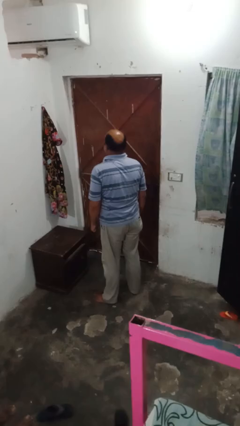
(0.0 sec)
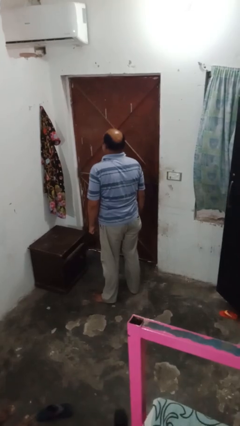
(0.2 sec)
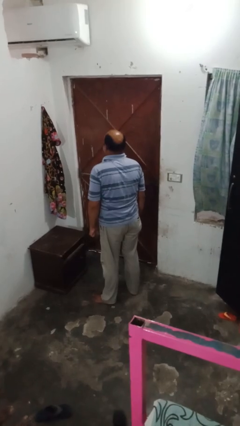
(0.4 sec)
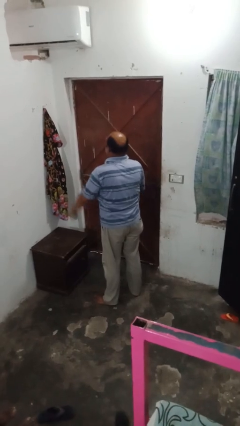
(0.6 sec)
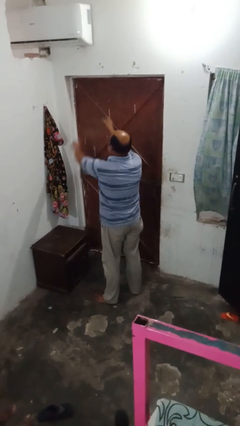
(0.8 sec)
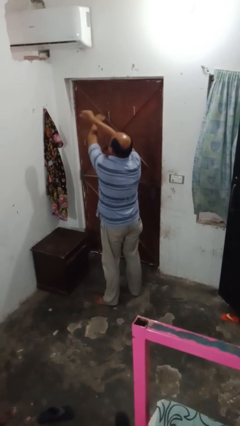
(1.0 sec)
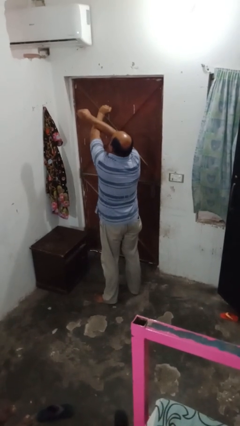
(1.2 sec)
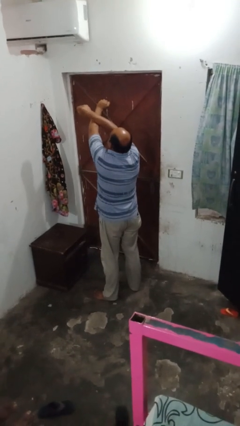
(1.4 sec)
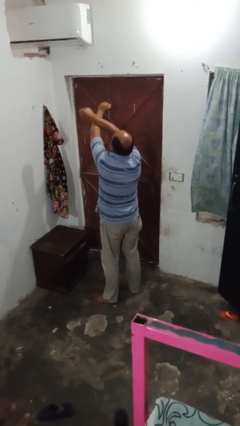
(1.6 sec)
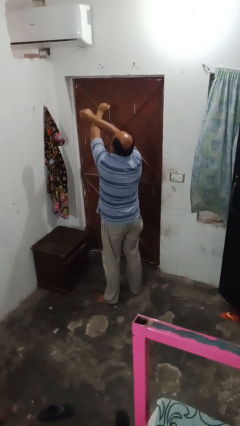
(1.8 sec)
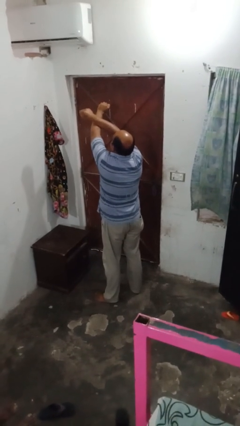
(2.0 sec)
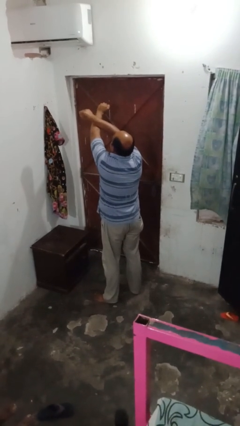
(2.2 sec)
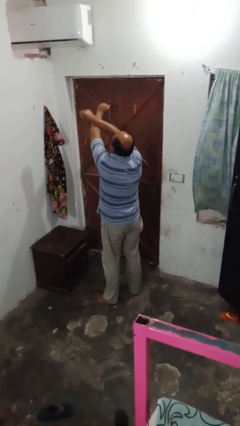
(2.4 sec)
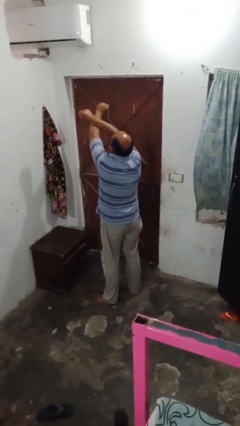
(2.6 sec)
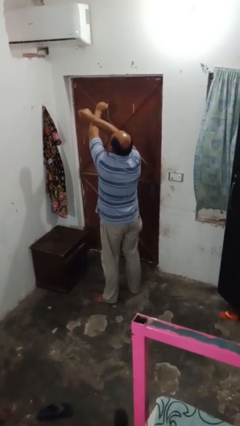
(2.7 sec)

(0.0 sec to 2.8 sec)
person gestures arms x

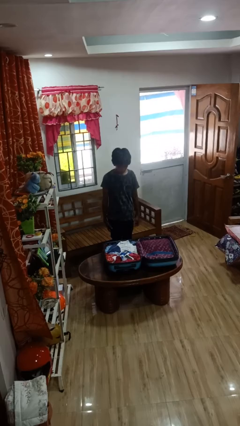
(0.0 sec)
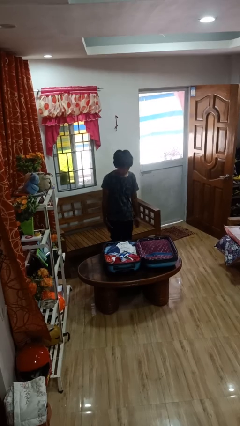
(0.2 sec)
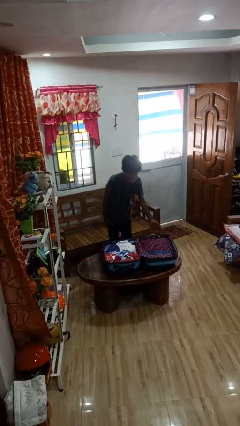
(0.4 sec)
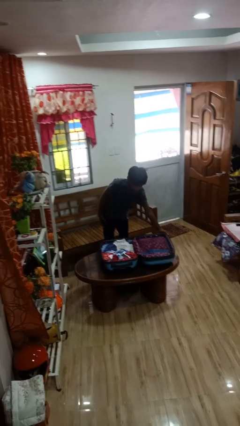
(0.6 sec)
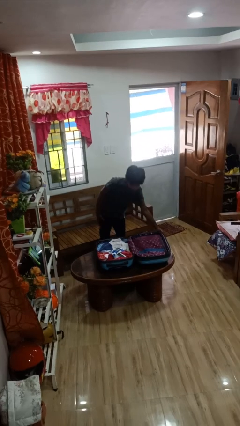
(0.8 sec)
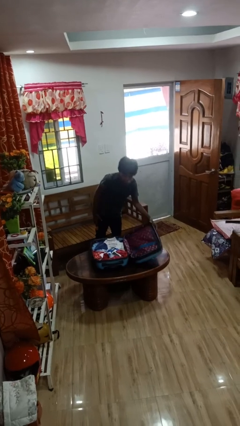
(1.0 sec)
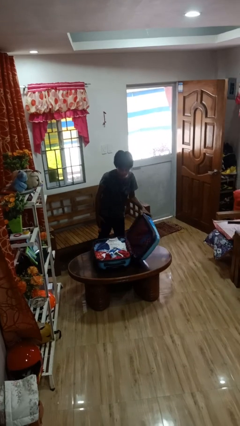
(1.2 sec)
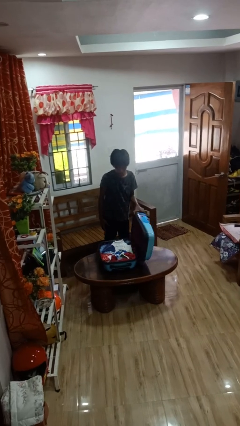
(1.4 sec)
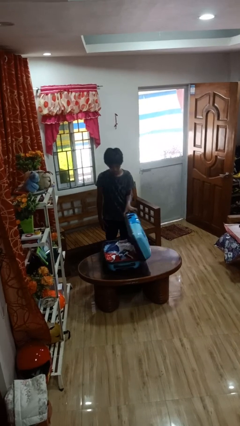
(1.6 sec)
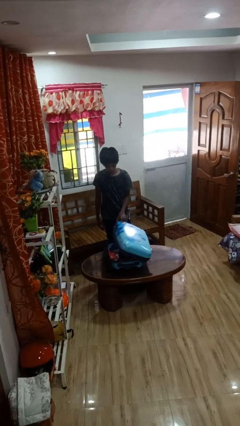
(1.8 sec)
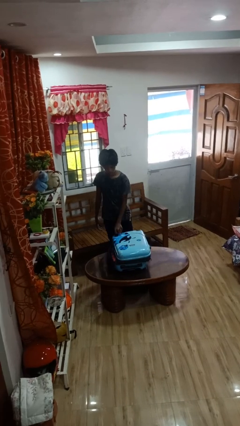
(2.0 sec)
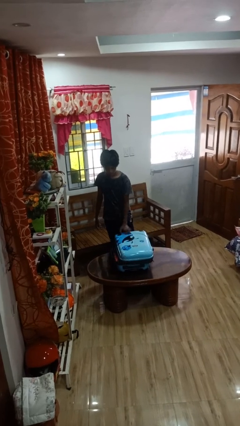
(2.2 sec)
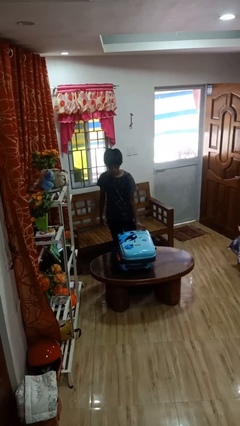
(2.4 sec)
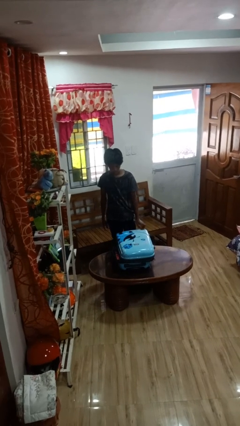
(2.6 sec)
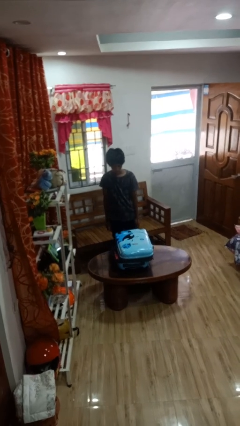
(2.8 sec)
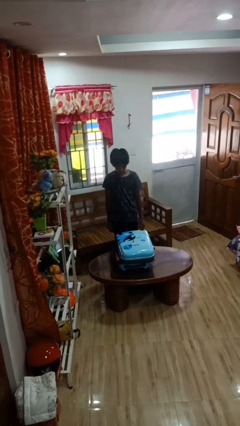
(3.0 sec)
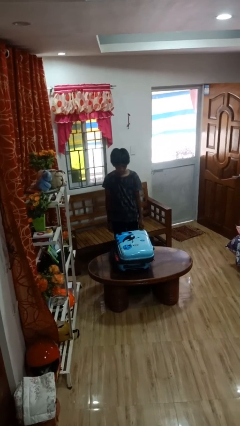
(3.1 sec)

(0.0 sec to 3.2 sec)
person closes suitcase

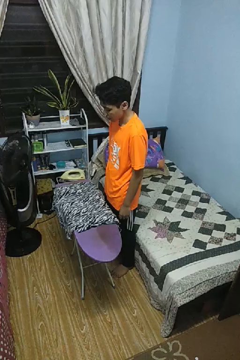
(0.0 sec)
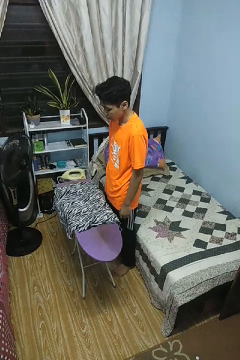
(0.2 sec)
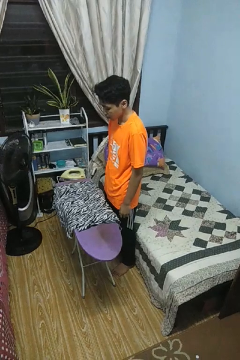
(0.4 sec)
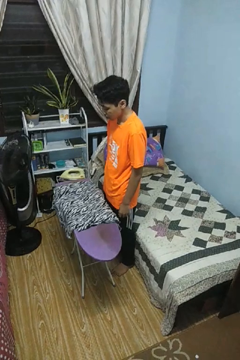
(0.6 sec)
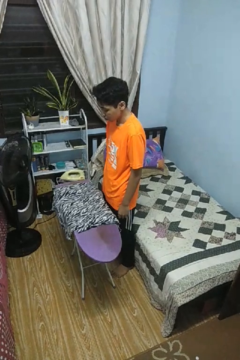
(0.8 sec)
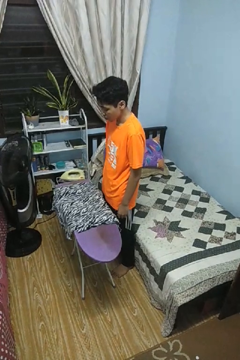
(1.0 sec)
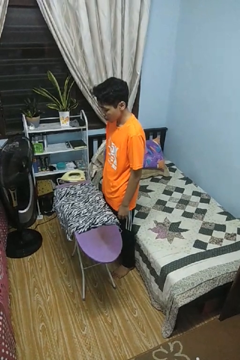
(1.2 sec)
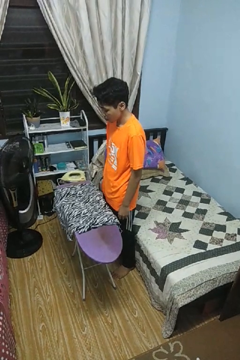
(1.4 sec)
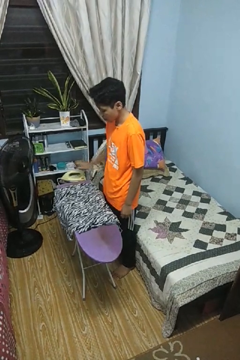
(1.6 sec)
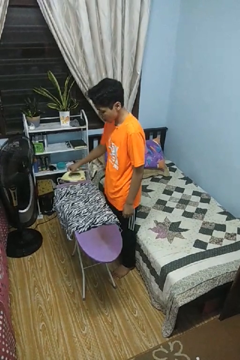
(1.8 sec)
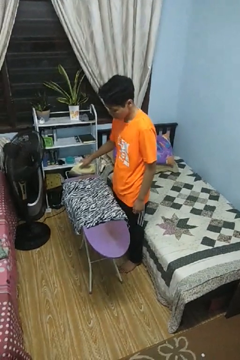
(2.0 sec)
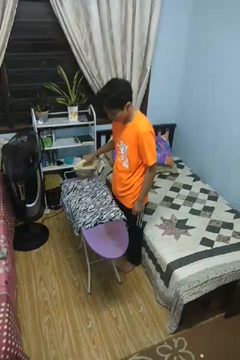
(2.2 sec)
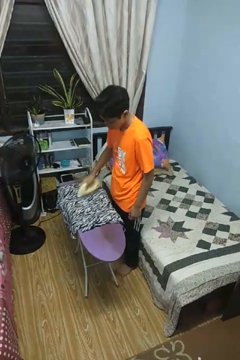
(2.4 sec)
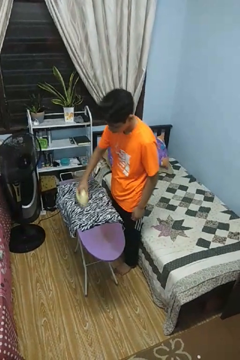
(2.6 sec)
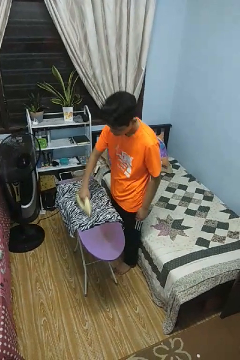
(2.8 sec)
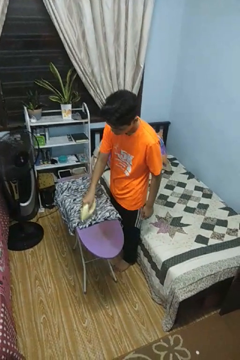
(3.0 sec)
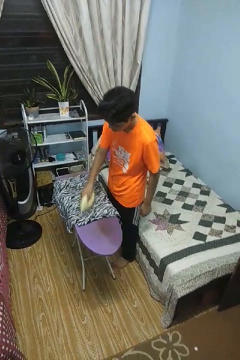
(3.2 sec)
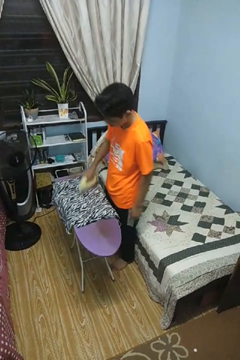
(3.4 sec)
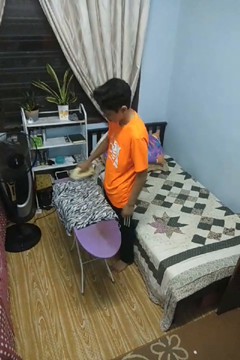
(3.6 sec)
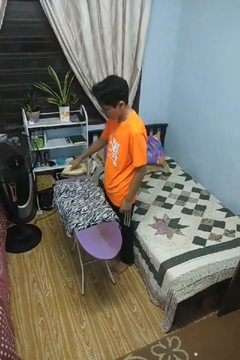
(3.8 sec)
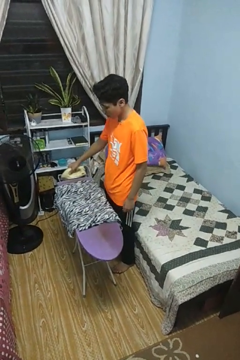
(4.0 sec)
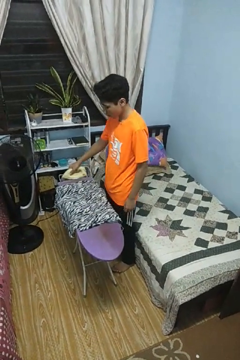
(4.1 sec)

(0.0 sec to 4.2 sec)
person irons clothes

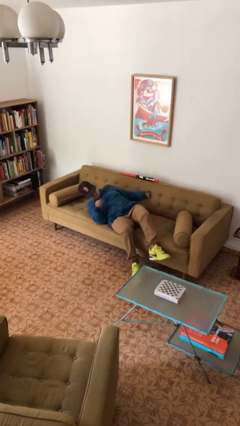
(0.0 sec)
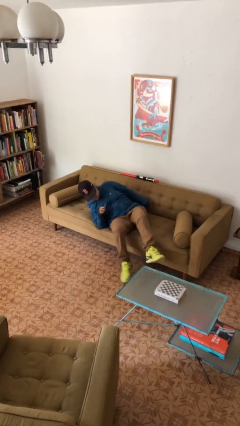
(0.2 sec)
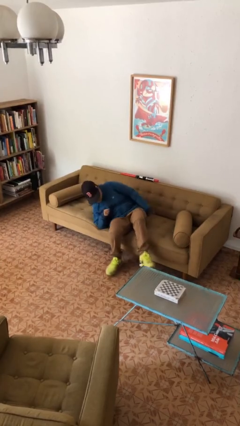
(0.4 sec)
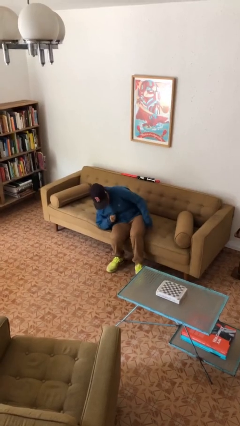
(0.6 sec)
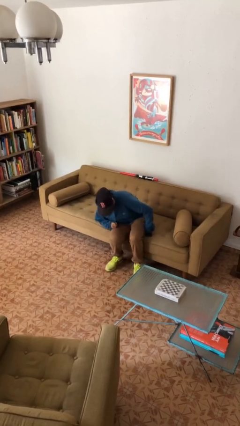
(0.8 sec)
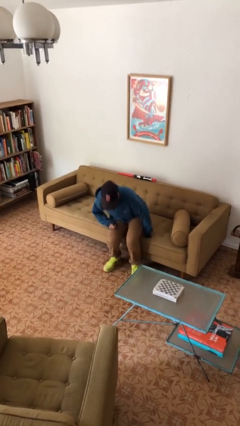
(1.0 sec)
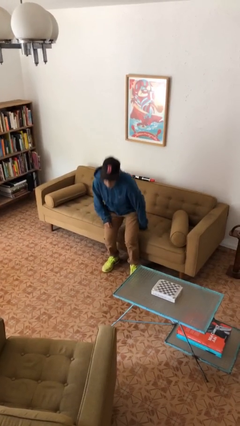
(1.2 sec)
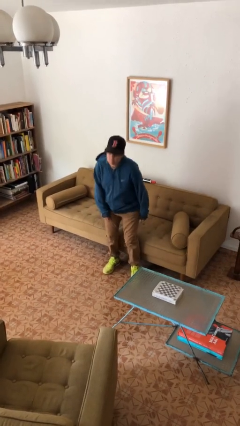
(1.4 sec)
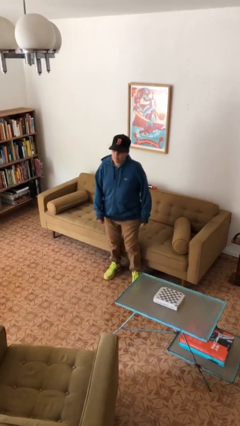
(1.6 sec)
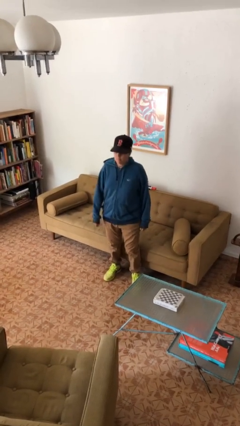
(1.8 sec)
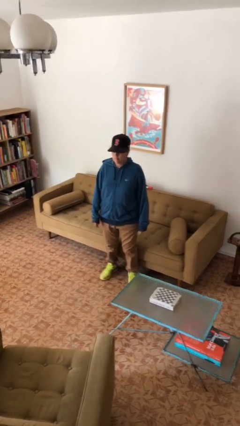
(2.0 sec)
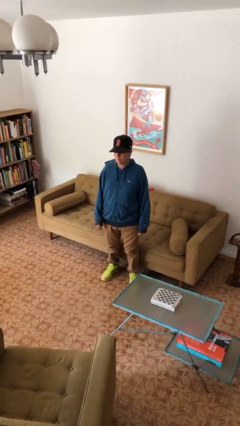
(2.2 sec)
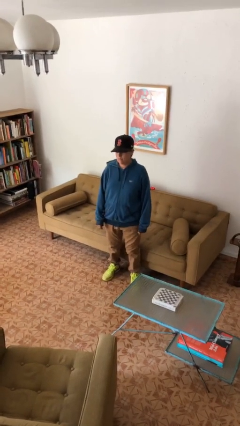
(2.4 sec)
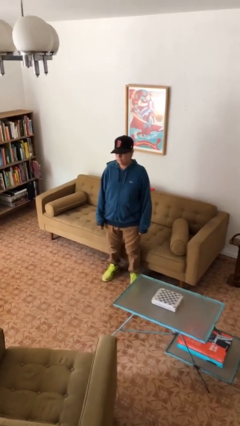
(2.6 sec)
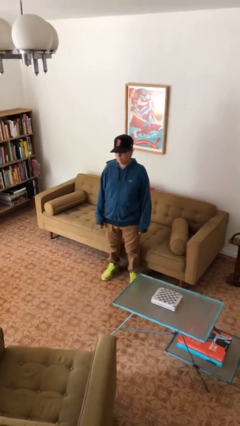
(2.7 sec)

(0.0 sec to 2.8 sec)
person stands up

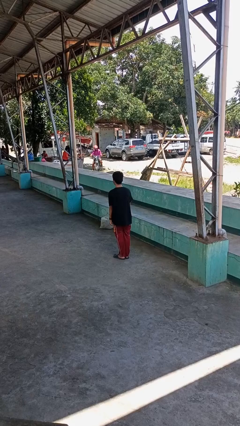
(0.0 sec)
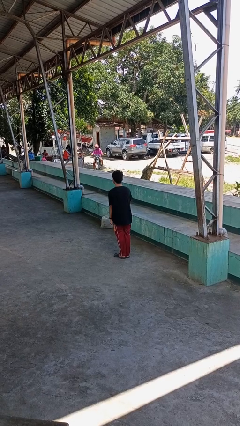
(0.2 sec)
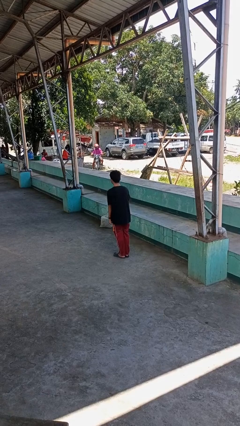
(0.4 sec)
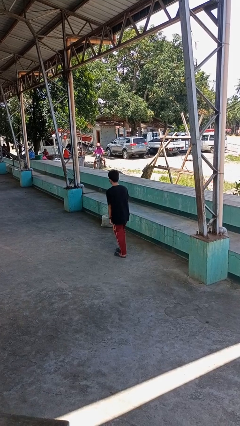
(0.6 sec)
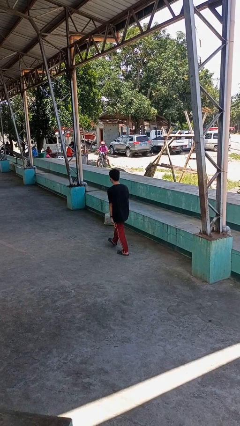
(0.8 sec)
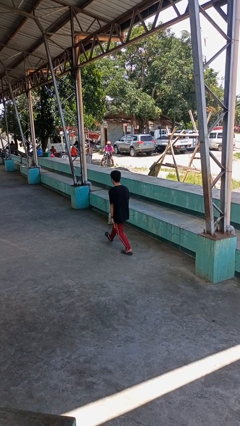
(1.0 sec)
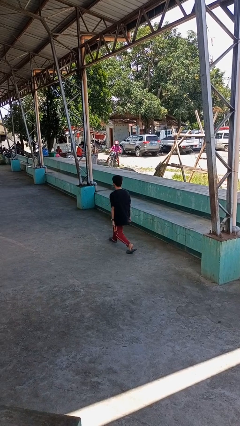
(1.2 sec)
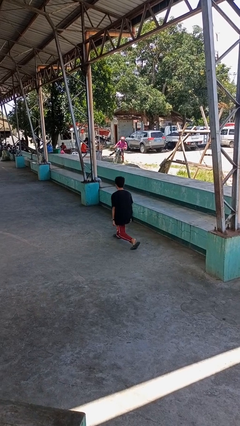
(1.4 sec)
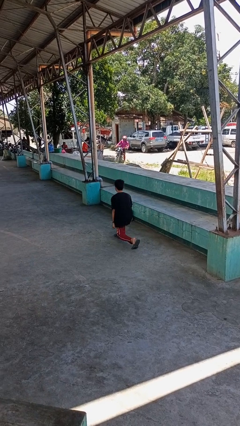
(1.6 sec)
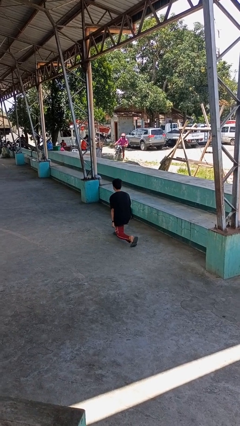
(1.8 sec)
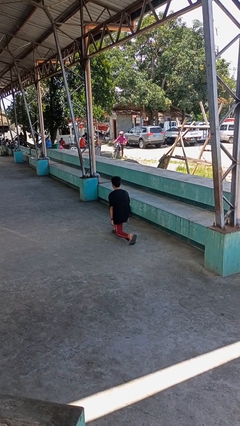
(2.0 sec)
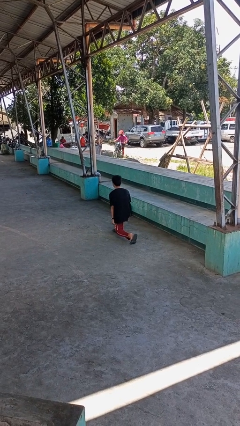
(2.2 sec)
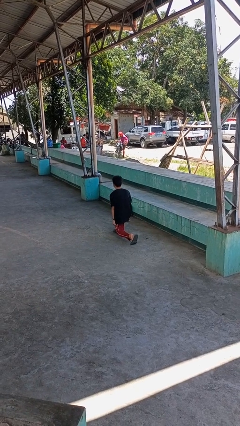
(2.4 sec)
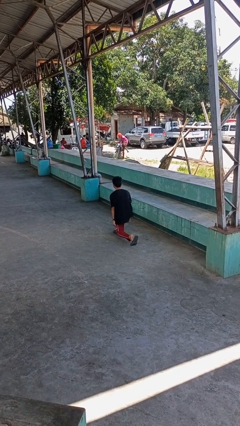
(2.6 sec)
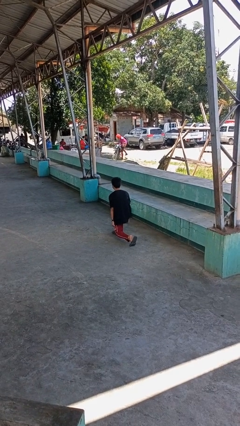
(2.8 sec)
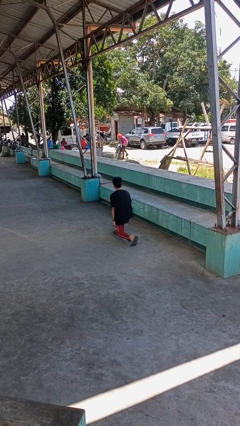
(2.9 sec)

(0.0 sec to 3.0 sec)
person exercises with lunges

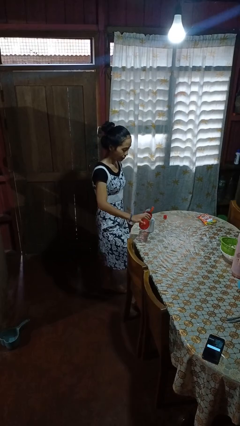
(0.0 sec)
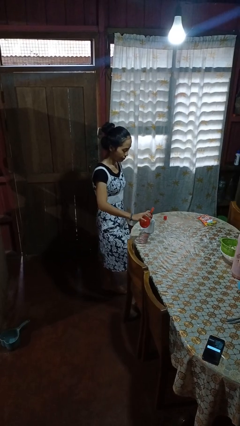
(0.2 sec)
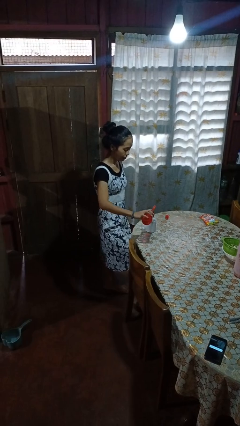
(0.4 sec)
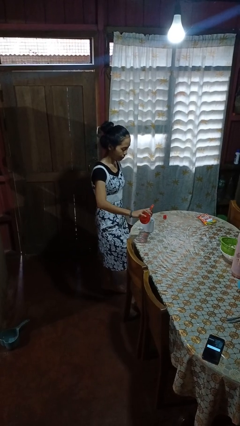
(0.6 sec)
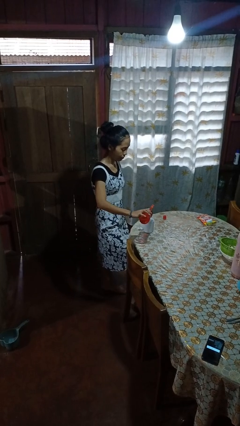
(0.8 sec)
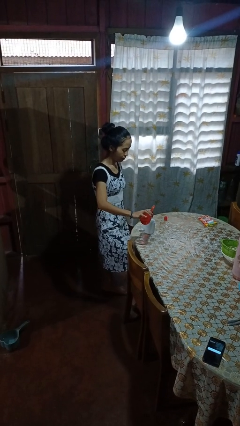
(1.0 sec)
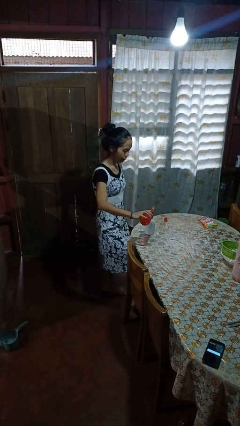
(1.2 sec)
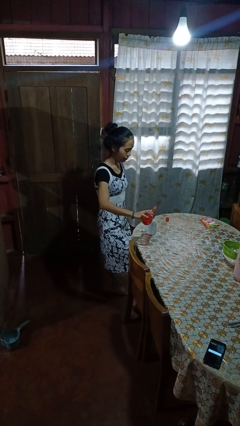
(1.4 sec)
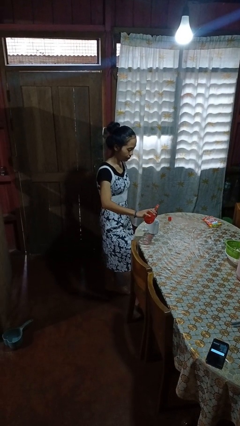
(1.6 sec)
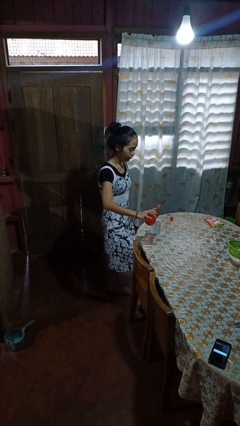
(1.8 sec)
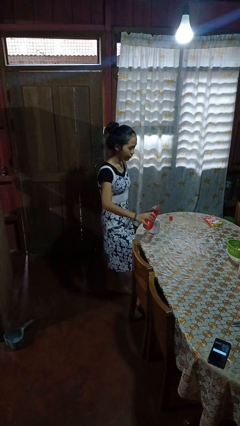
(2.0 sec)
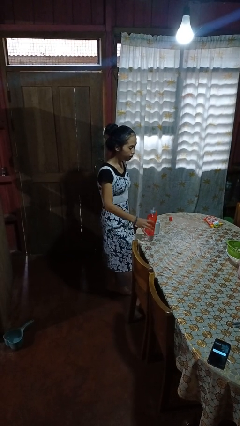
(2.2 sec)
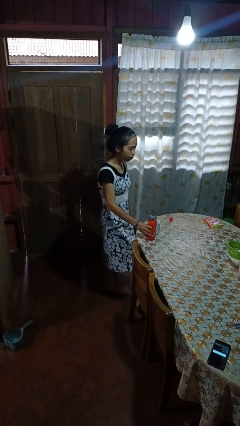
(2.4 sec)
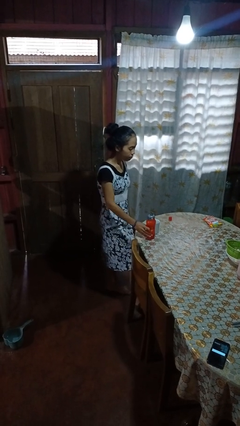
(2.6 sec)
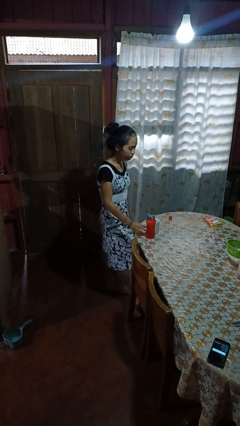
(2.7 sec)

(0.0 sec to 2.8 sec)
person pours liquid into cup
